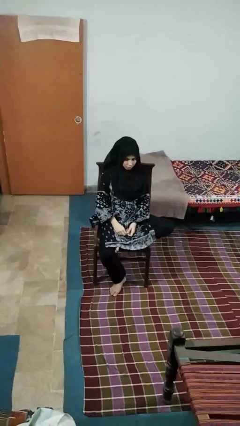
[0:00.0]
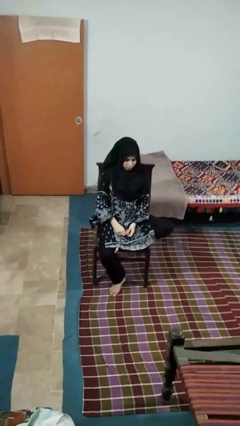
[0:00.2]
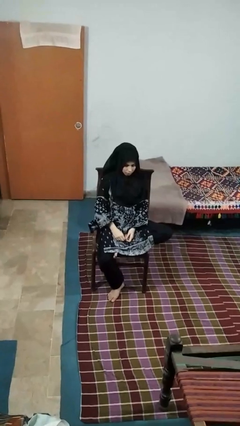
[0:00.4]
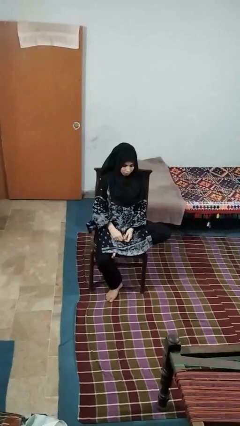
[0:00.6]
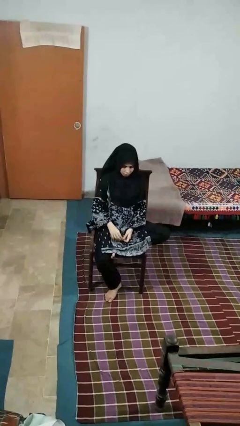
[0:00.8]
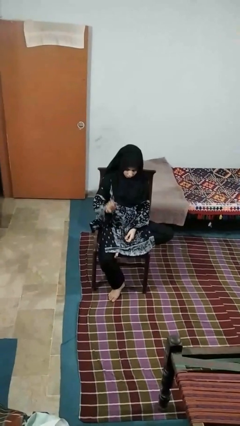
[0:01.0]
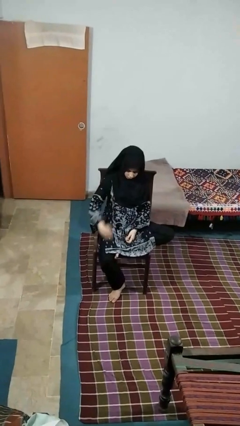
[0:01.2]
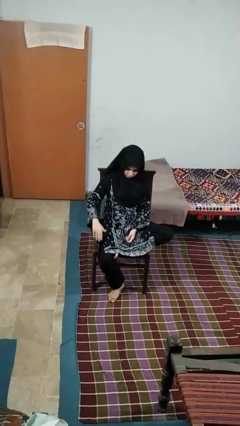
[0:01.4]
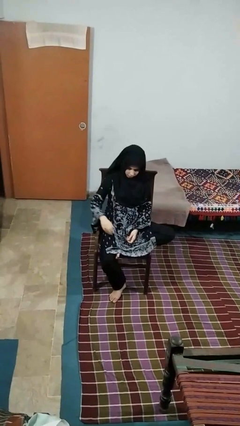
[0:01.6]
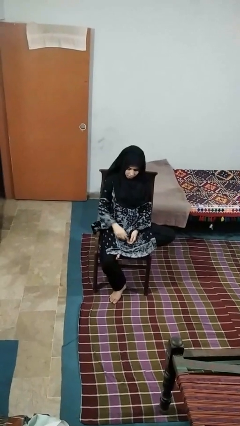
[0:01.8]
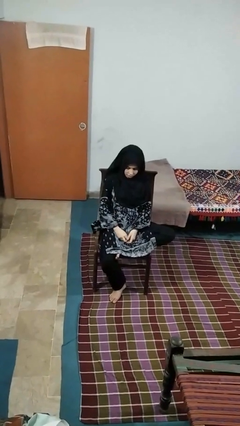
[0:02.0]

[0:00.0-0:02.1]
person swats bug

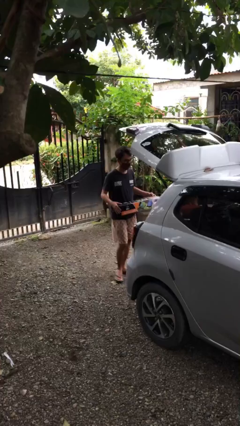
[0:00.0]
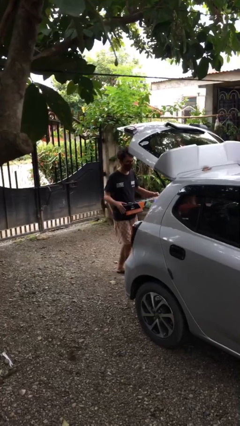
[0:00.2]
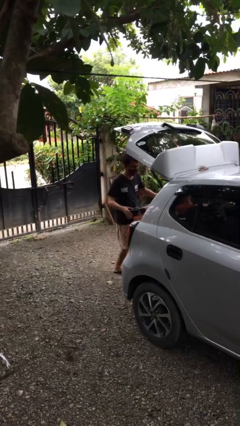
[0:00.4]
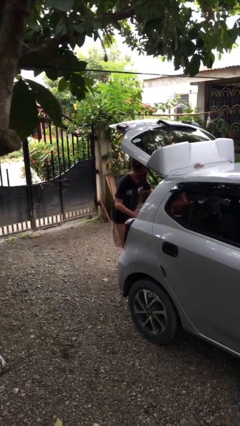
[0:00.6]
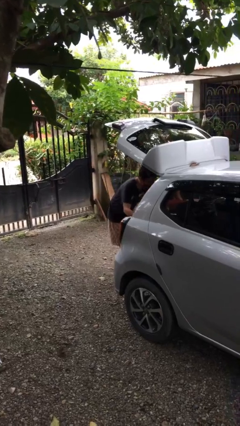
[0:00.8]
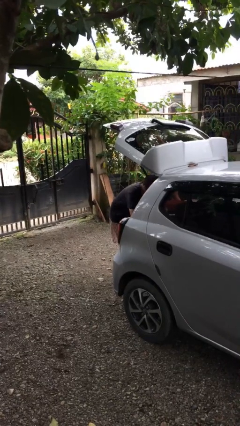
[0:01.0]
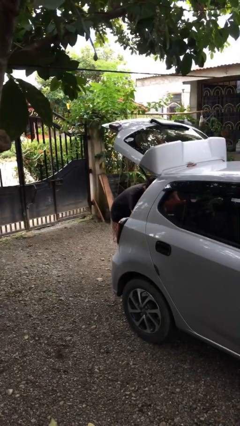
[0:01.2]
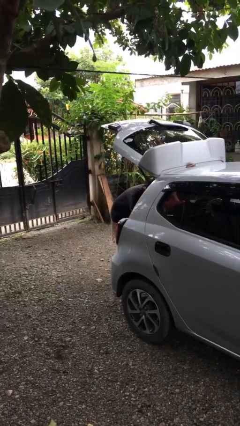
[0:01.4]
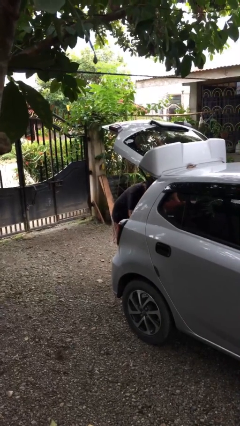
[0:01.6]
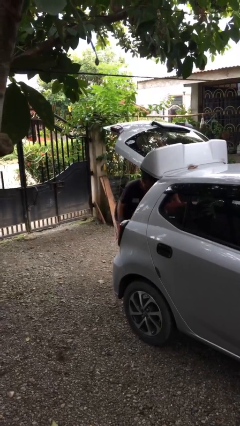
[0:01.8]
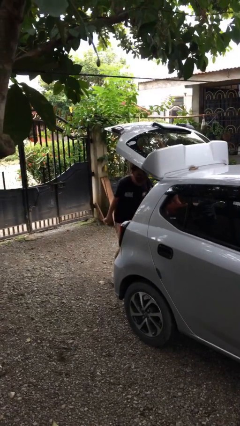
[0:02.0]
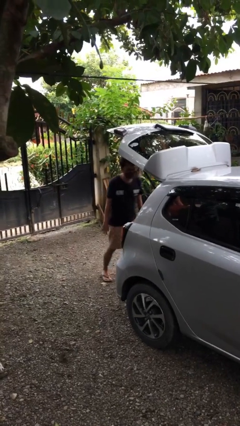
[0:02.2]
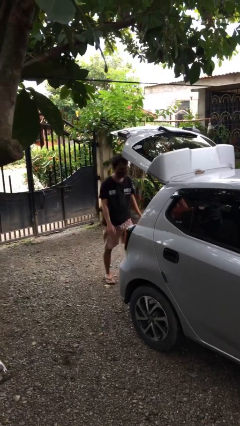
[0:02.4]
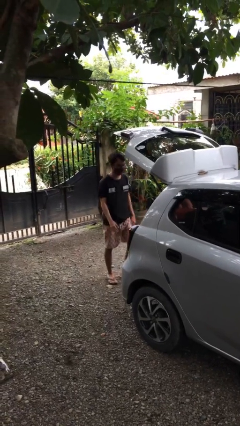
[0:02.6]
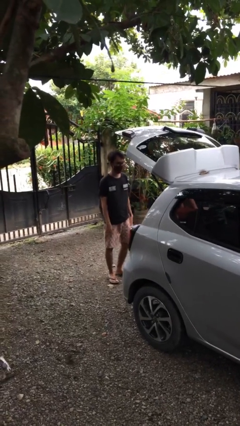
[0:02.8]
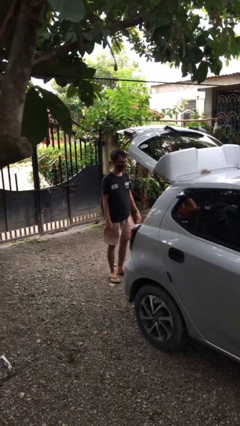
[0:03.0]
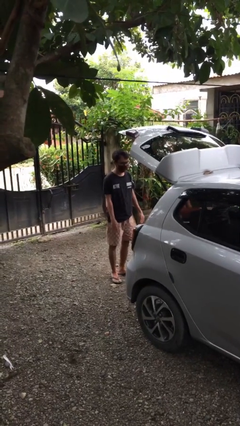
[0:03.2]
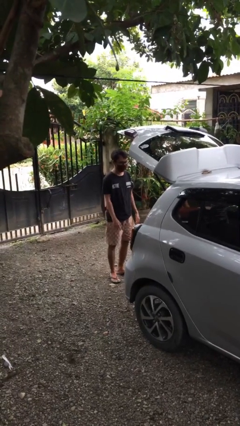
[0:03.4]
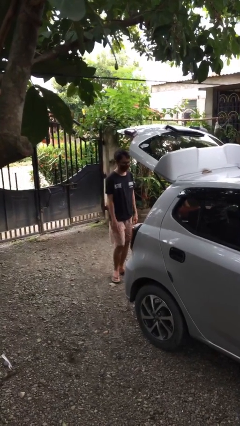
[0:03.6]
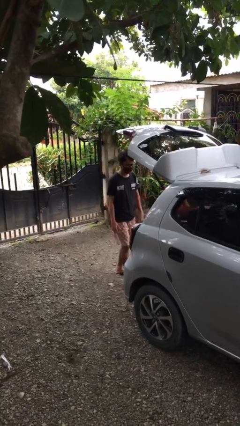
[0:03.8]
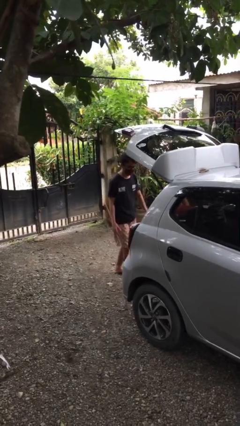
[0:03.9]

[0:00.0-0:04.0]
person loads car

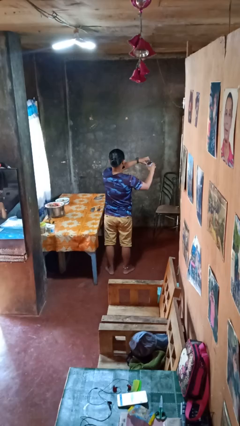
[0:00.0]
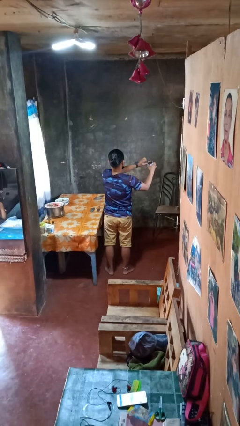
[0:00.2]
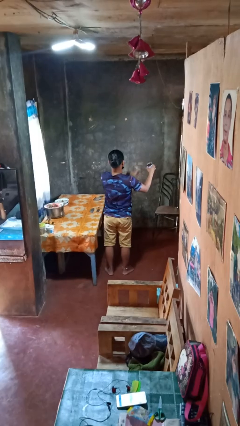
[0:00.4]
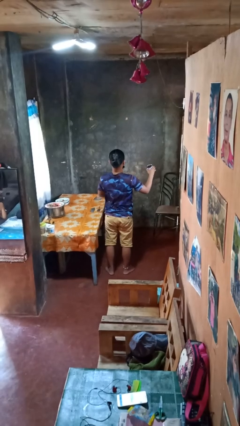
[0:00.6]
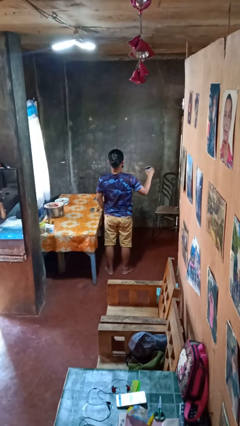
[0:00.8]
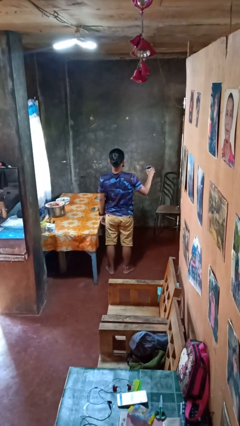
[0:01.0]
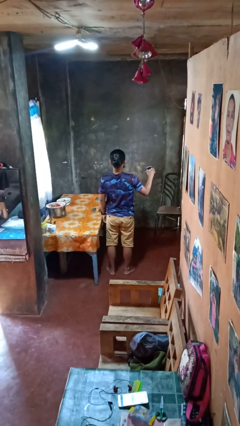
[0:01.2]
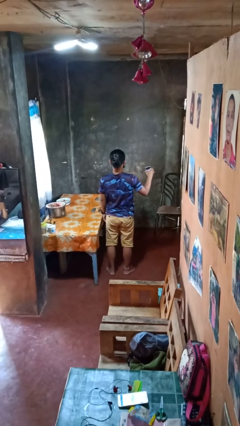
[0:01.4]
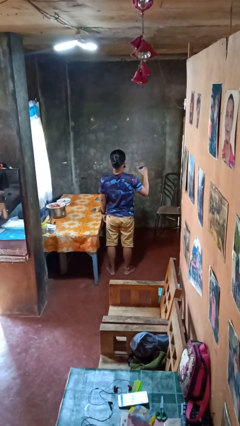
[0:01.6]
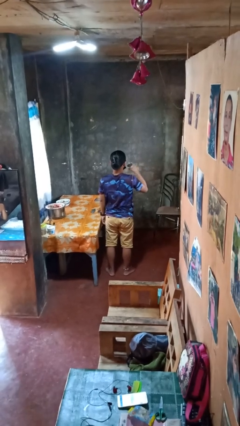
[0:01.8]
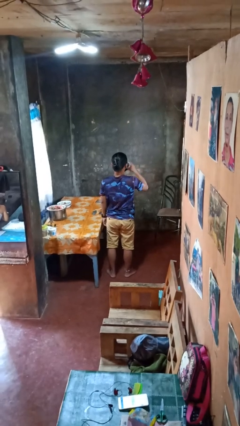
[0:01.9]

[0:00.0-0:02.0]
person opens beverage can

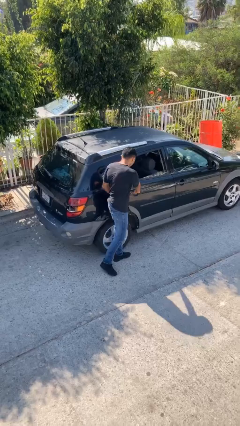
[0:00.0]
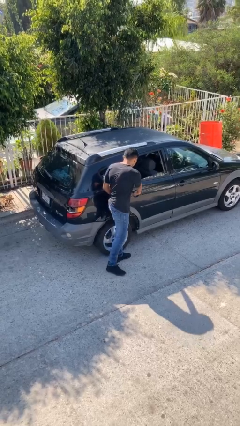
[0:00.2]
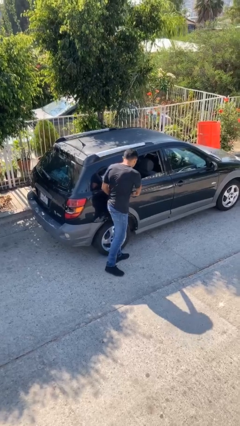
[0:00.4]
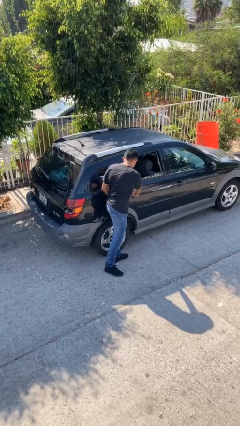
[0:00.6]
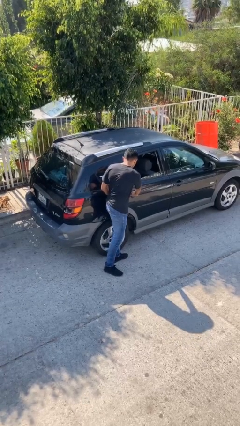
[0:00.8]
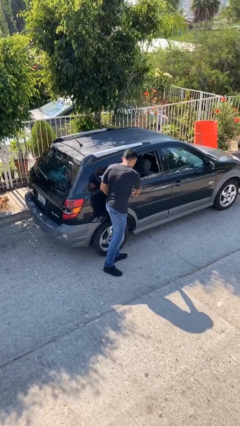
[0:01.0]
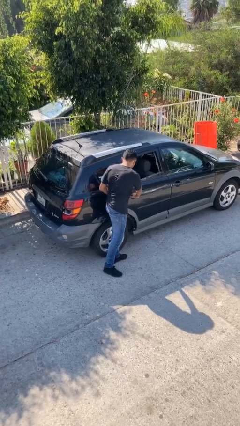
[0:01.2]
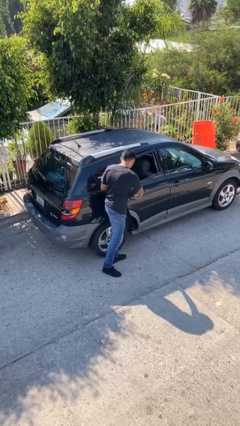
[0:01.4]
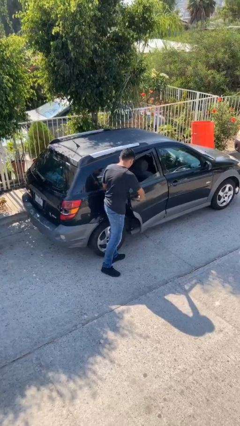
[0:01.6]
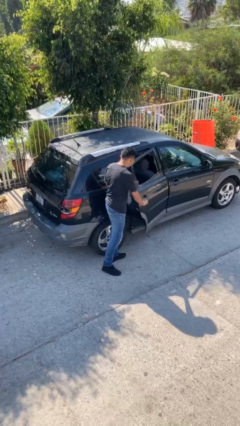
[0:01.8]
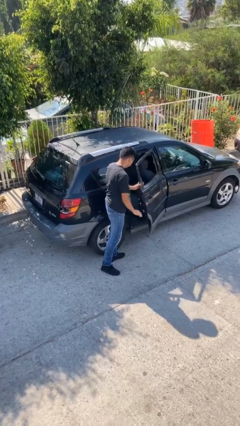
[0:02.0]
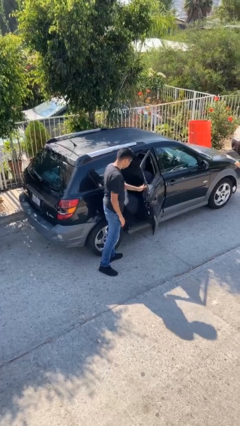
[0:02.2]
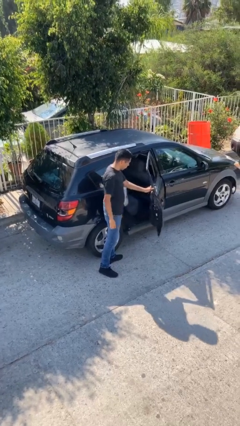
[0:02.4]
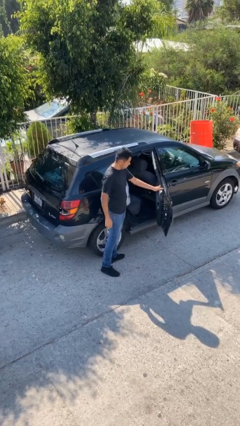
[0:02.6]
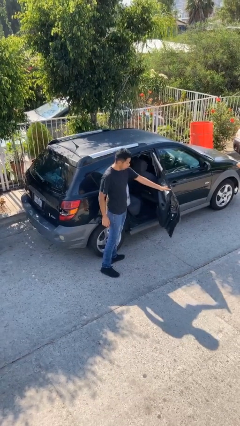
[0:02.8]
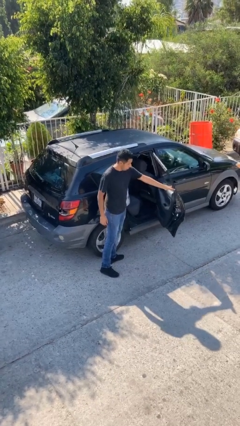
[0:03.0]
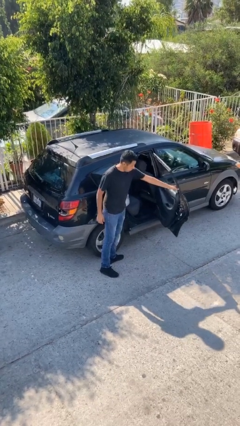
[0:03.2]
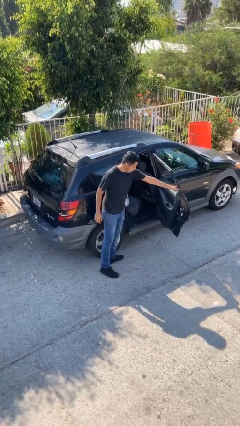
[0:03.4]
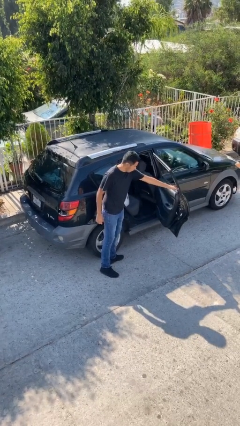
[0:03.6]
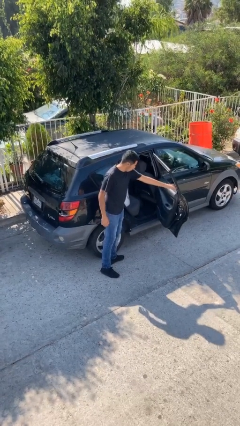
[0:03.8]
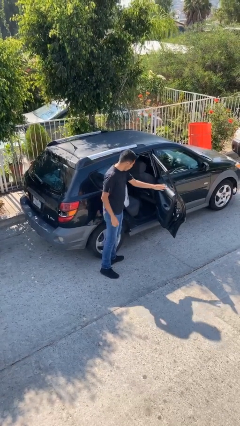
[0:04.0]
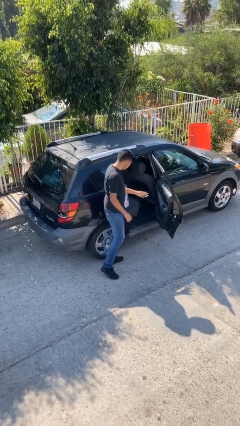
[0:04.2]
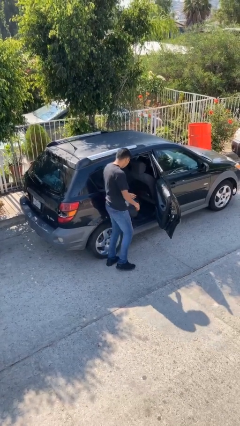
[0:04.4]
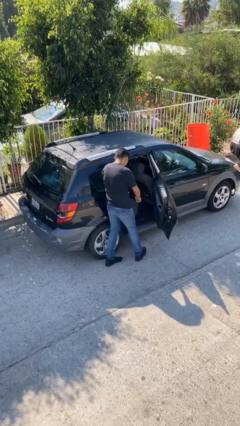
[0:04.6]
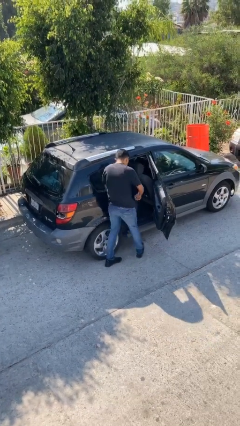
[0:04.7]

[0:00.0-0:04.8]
person opens car door

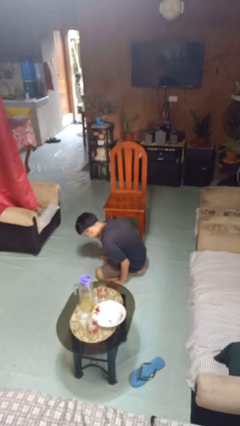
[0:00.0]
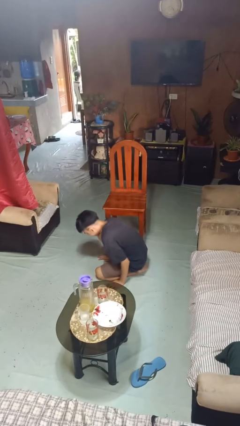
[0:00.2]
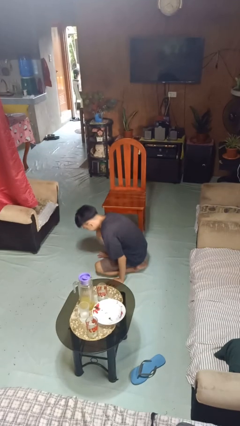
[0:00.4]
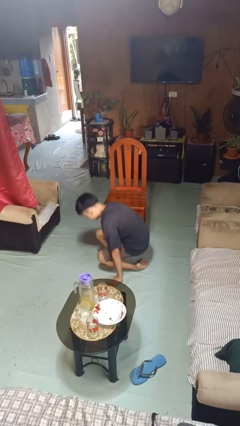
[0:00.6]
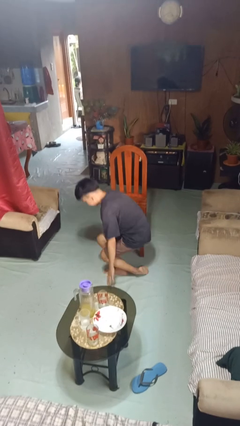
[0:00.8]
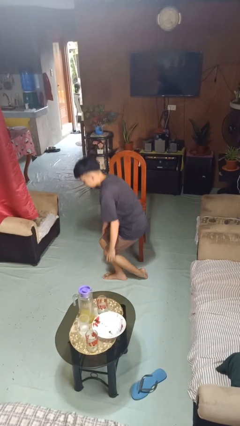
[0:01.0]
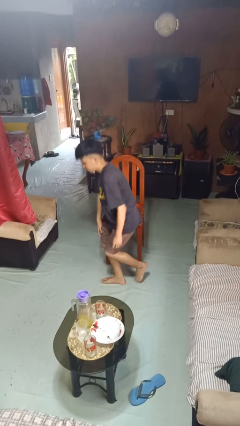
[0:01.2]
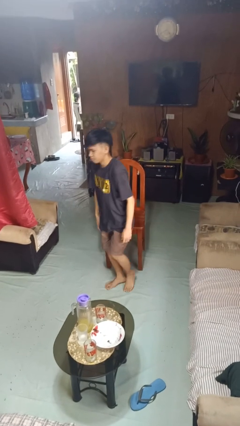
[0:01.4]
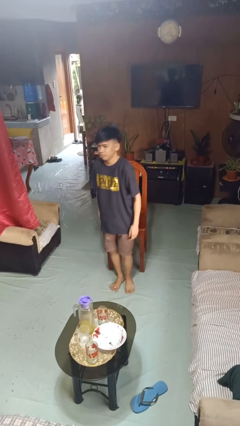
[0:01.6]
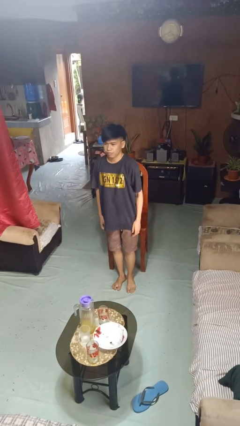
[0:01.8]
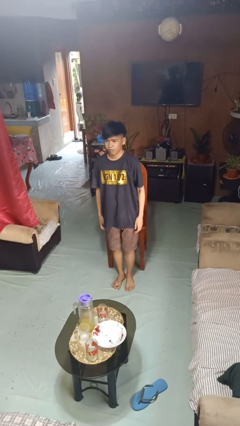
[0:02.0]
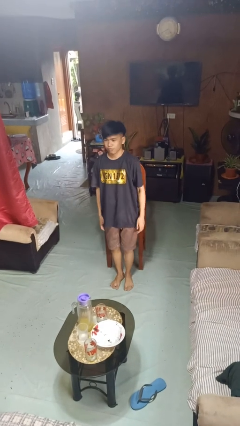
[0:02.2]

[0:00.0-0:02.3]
person stands up from floor

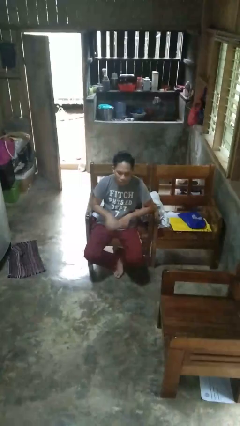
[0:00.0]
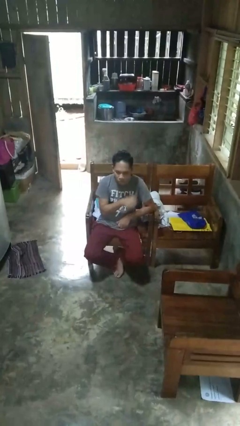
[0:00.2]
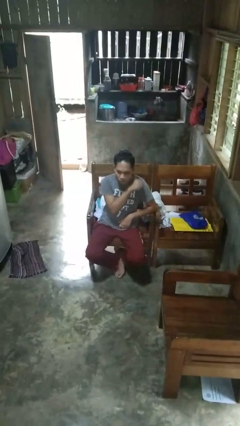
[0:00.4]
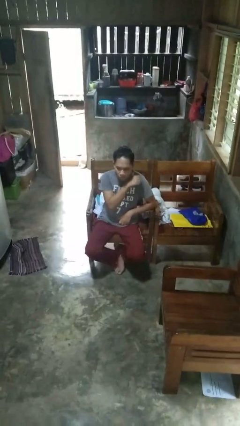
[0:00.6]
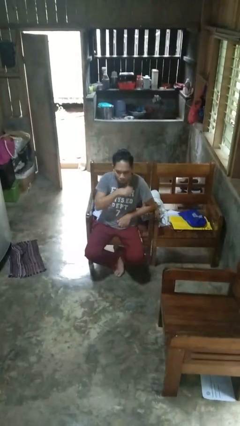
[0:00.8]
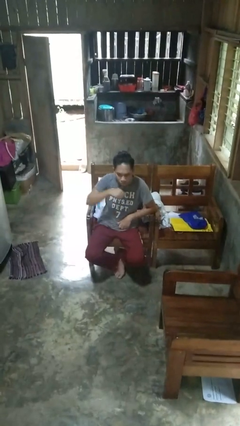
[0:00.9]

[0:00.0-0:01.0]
person gestures cut

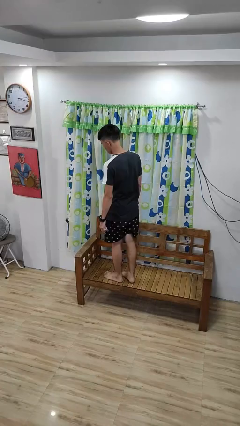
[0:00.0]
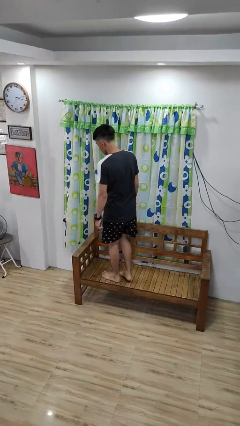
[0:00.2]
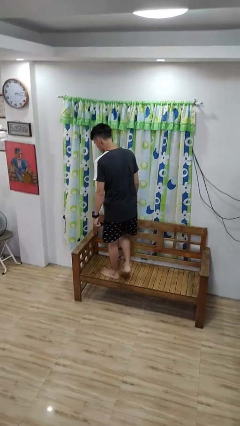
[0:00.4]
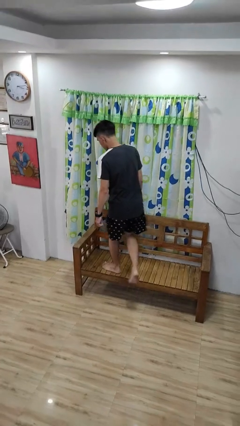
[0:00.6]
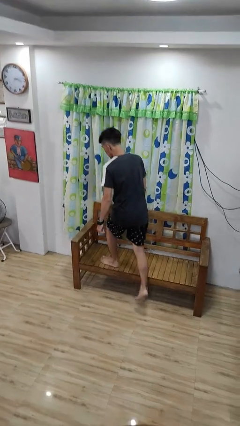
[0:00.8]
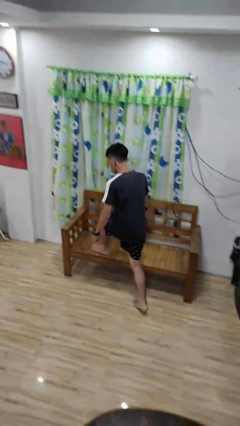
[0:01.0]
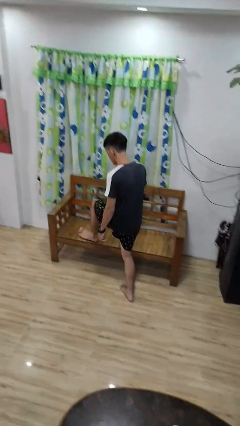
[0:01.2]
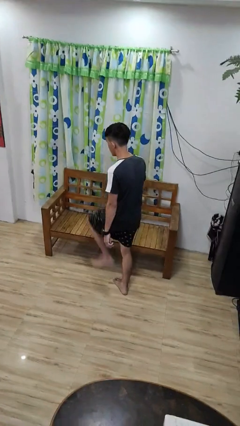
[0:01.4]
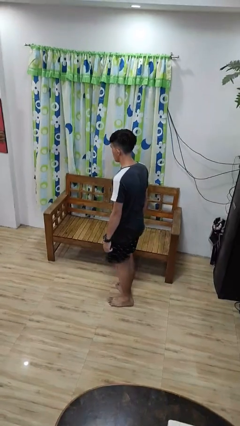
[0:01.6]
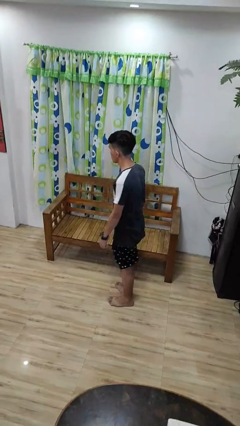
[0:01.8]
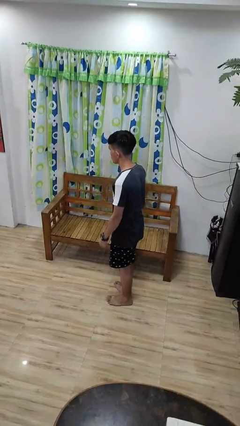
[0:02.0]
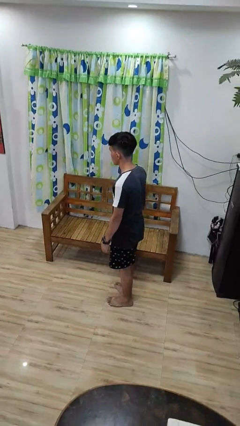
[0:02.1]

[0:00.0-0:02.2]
person climbs off couch
